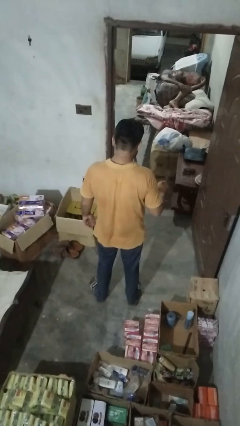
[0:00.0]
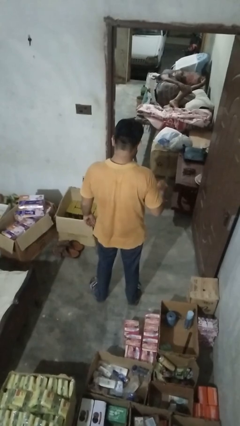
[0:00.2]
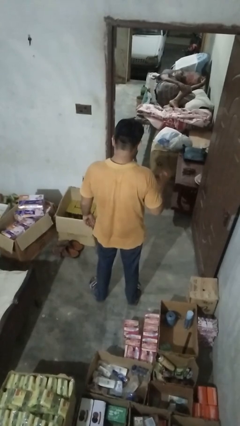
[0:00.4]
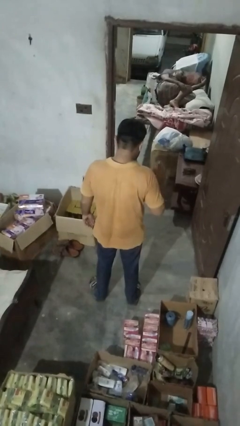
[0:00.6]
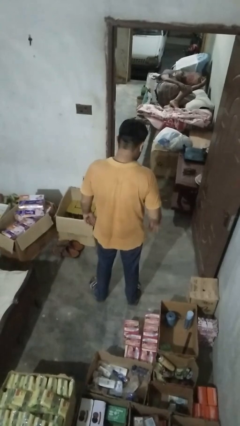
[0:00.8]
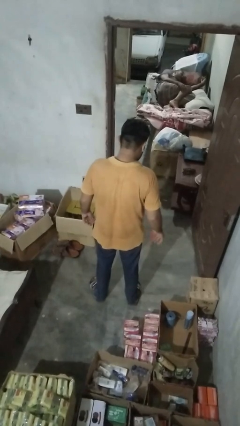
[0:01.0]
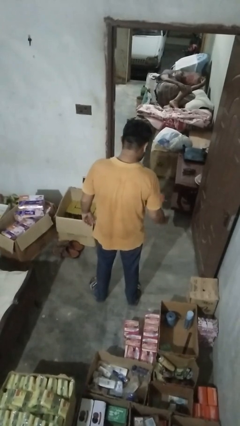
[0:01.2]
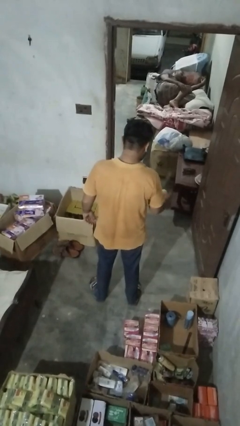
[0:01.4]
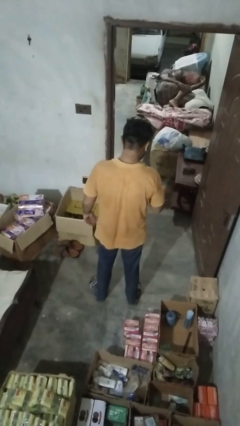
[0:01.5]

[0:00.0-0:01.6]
person bounces ball on floor

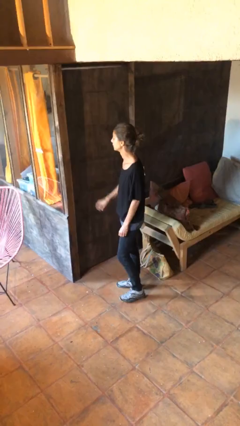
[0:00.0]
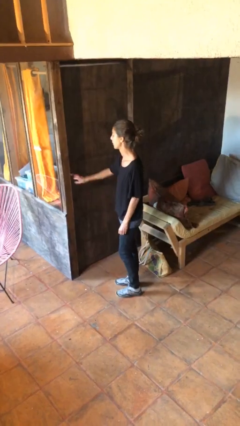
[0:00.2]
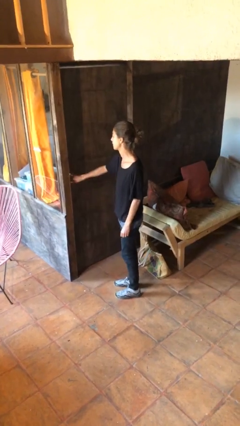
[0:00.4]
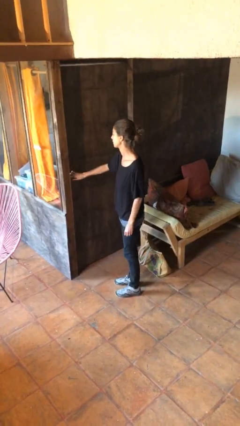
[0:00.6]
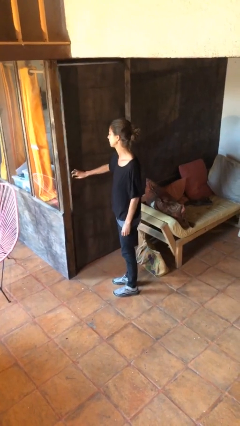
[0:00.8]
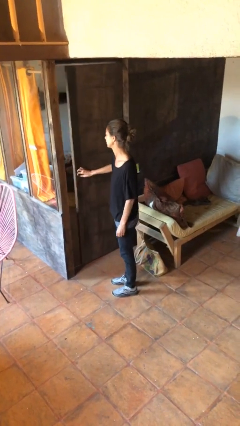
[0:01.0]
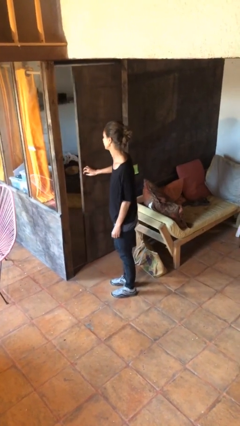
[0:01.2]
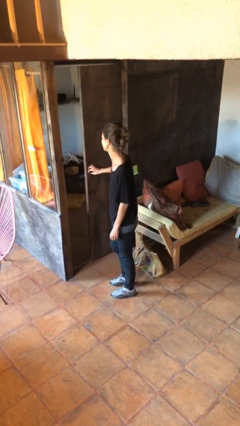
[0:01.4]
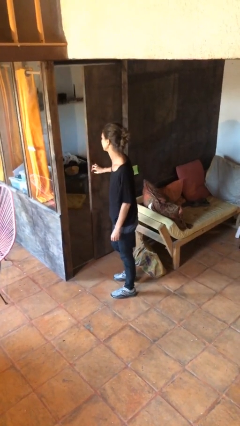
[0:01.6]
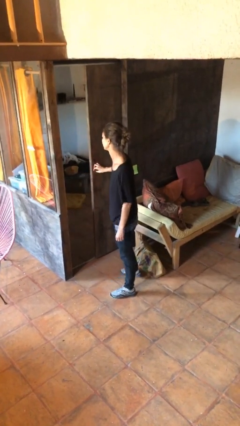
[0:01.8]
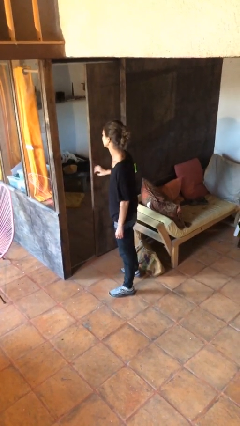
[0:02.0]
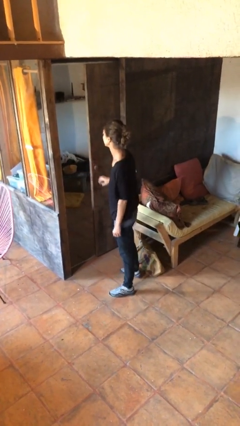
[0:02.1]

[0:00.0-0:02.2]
person opens facility door

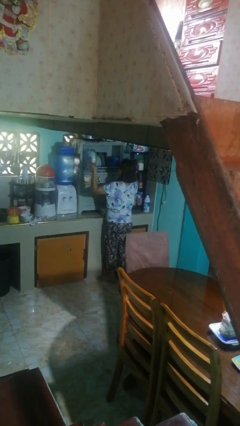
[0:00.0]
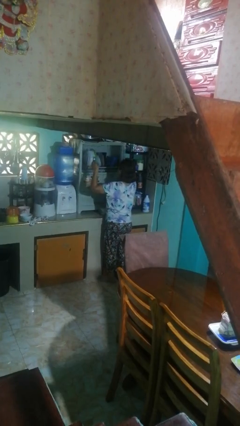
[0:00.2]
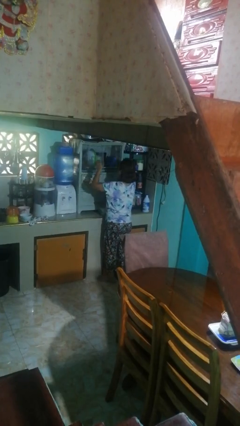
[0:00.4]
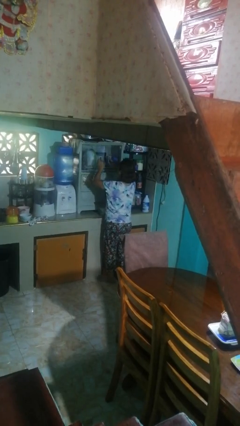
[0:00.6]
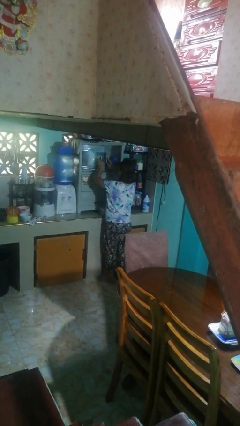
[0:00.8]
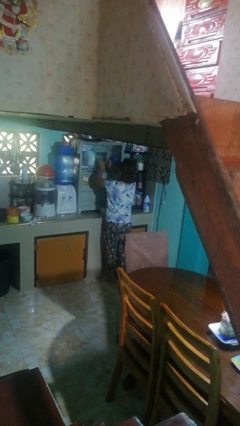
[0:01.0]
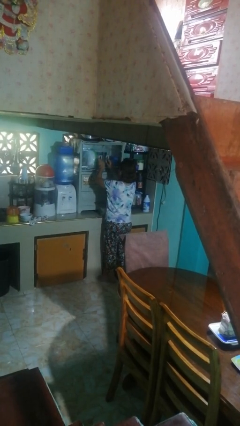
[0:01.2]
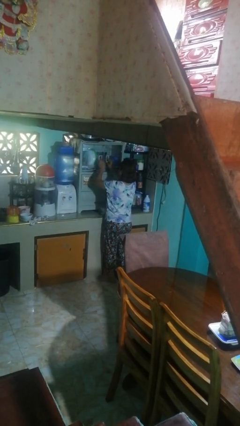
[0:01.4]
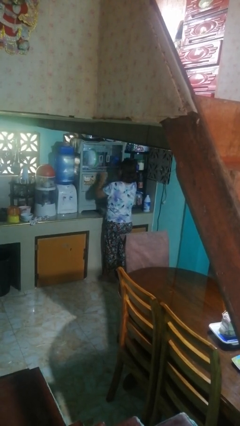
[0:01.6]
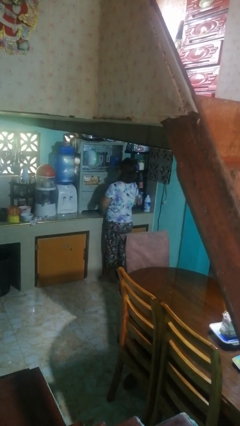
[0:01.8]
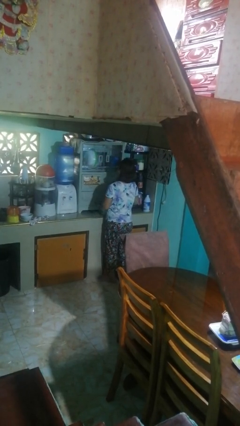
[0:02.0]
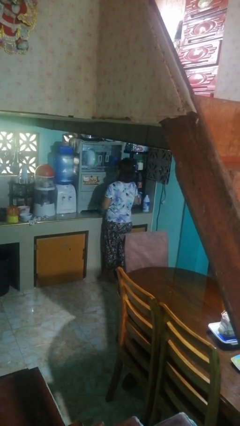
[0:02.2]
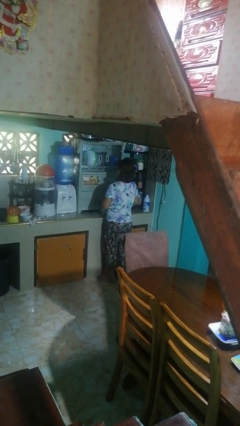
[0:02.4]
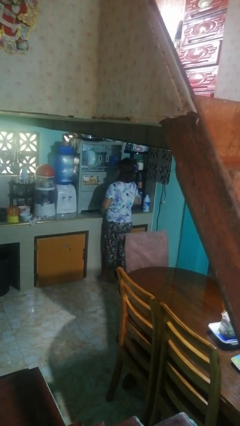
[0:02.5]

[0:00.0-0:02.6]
person opens curtains

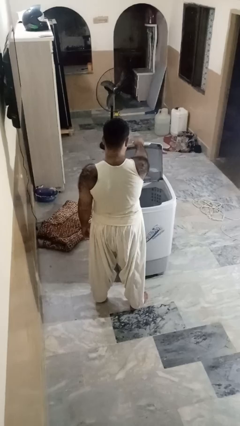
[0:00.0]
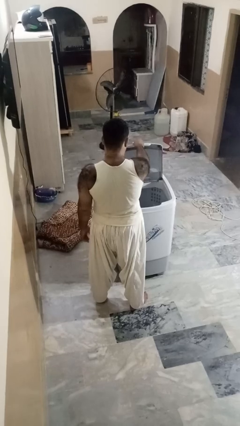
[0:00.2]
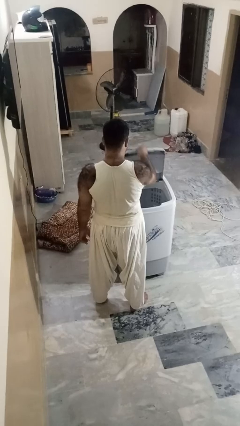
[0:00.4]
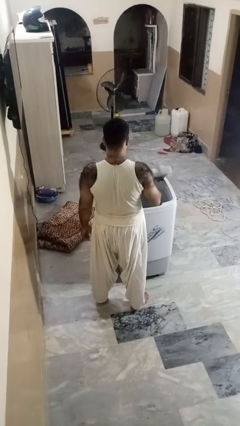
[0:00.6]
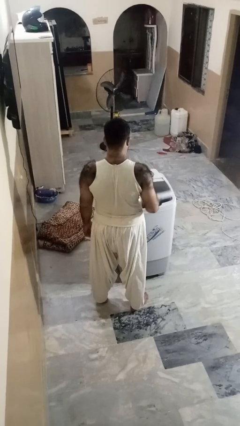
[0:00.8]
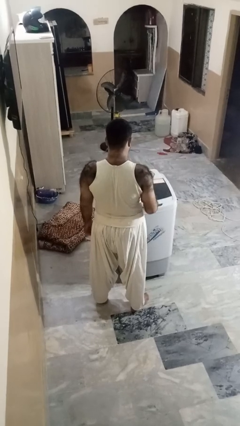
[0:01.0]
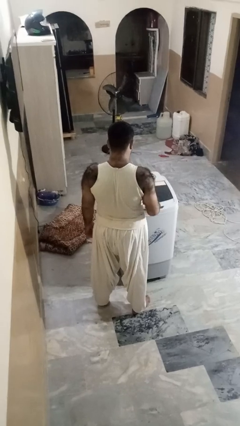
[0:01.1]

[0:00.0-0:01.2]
person closes clothes washer

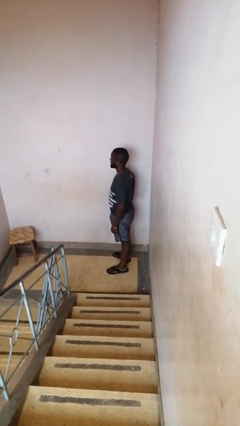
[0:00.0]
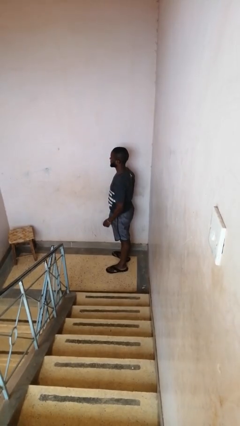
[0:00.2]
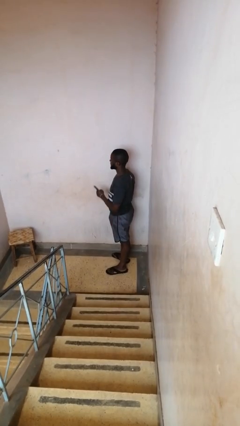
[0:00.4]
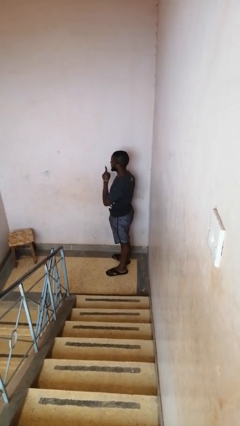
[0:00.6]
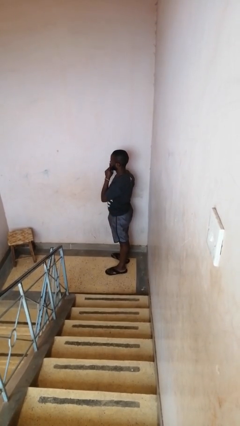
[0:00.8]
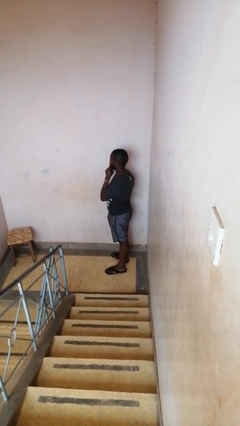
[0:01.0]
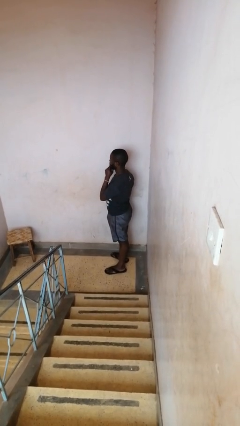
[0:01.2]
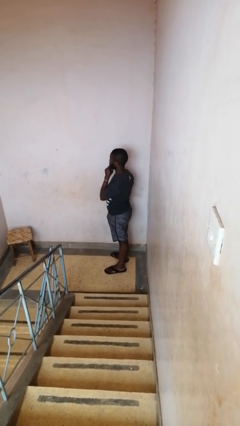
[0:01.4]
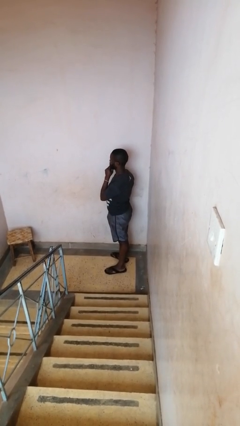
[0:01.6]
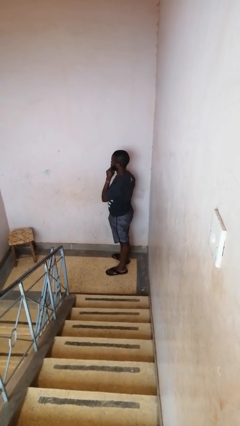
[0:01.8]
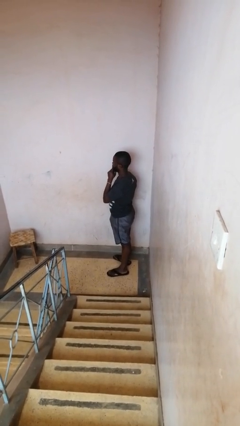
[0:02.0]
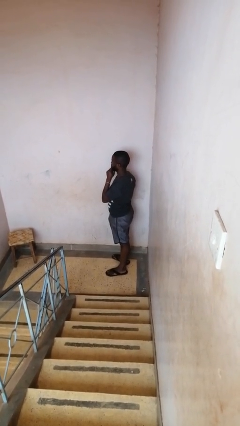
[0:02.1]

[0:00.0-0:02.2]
person gestures be quiet

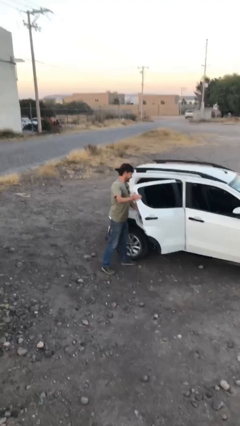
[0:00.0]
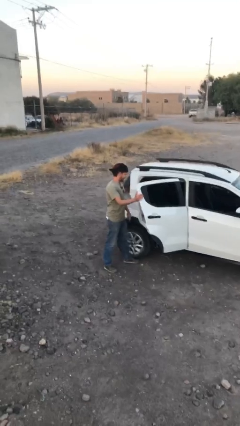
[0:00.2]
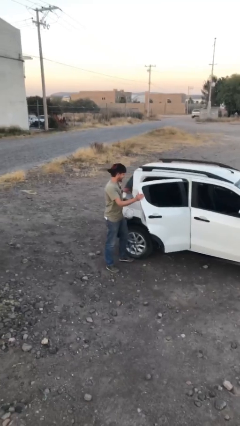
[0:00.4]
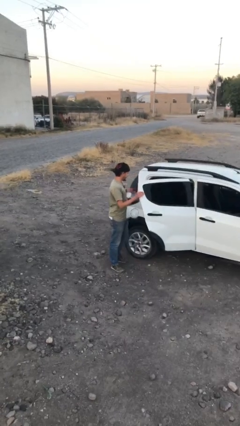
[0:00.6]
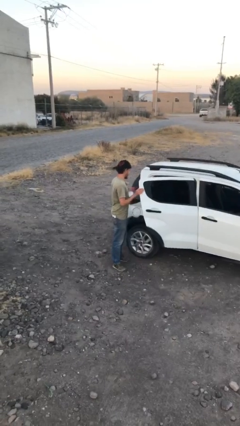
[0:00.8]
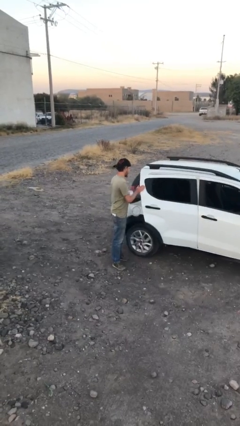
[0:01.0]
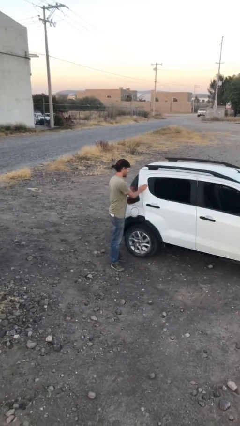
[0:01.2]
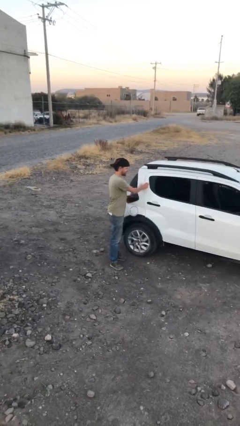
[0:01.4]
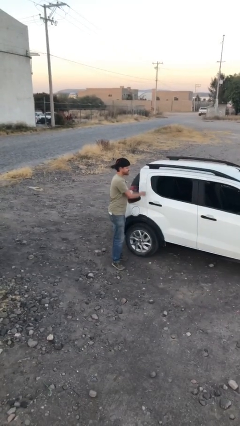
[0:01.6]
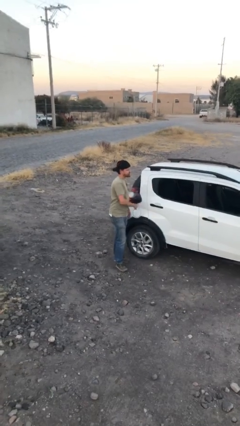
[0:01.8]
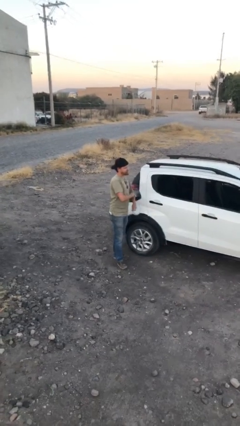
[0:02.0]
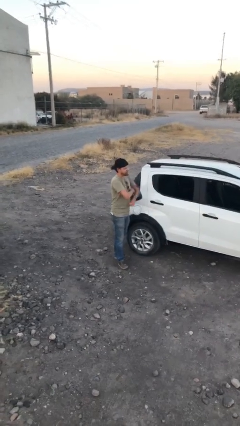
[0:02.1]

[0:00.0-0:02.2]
person closes car door

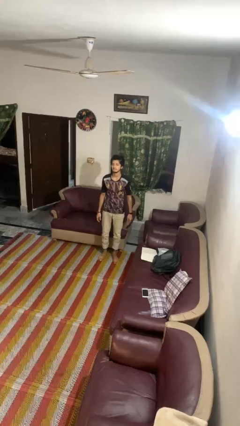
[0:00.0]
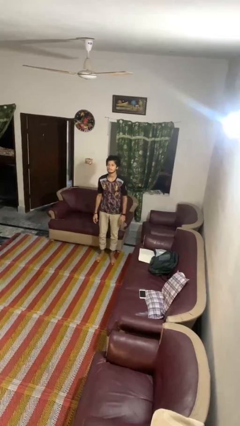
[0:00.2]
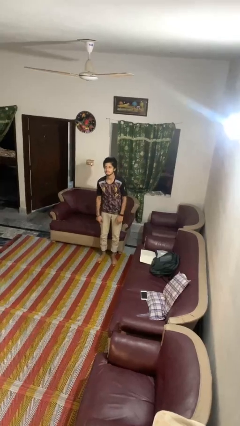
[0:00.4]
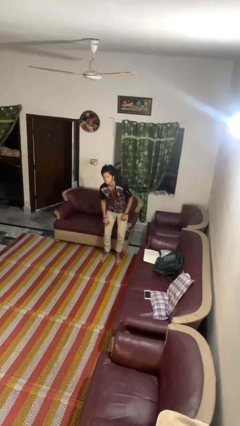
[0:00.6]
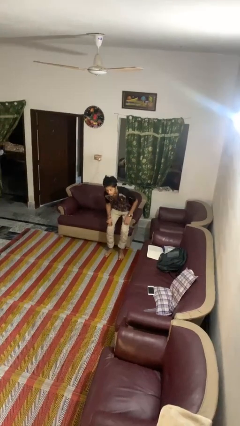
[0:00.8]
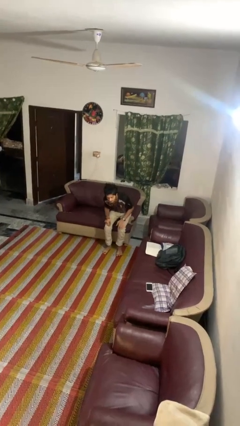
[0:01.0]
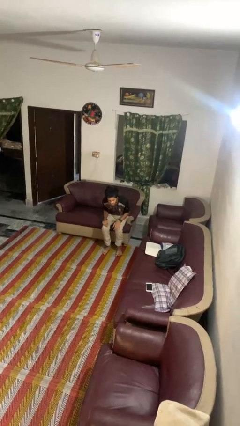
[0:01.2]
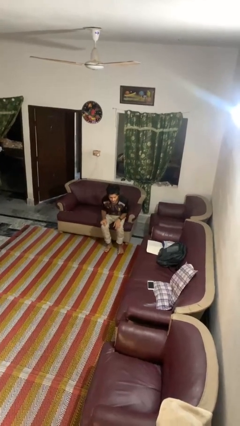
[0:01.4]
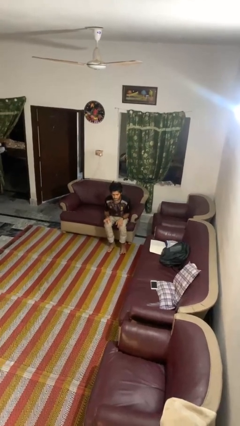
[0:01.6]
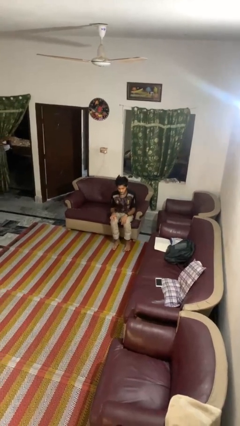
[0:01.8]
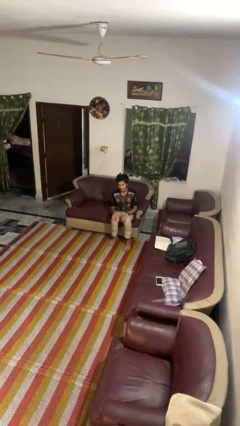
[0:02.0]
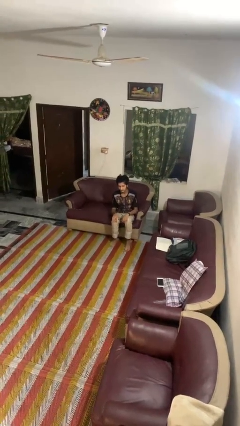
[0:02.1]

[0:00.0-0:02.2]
person sits down

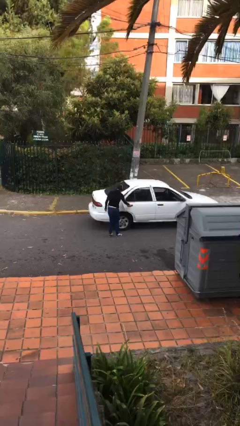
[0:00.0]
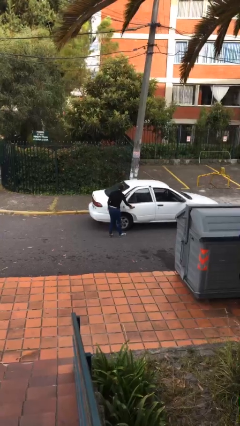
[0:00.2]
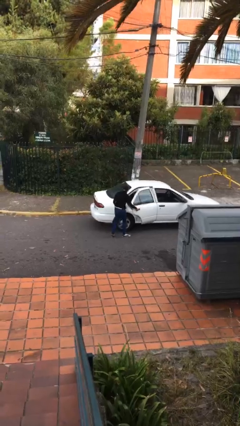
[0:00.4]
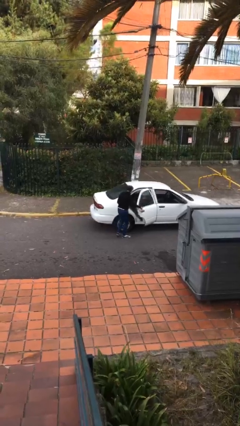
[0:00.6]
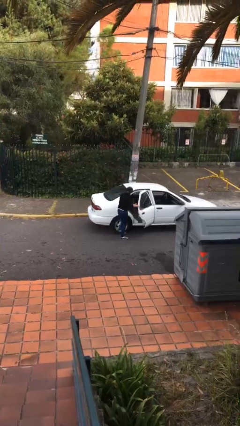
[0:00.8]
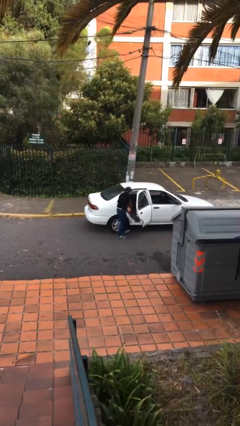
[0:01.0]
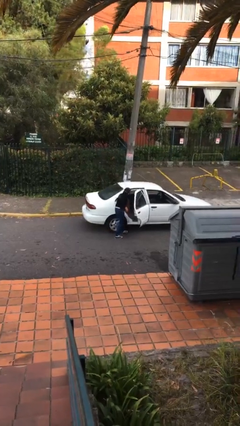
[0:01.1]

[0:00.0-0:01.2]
person opens car door

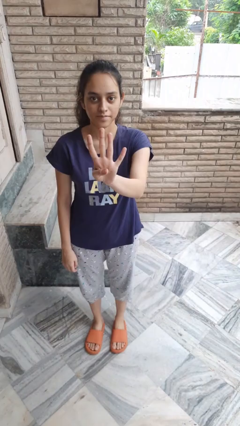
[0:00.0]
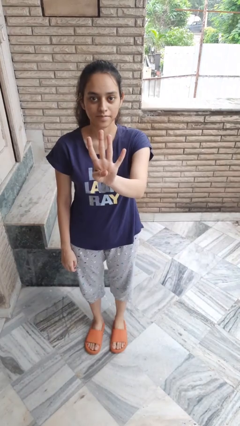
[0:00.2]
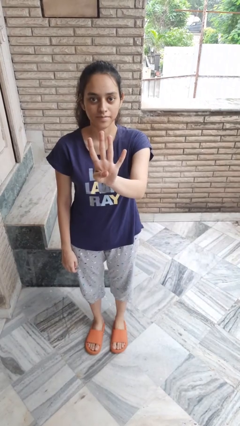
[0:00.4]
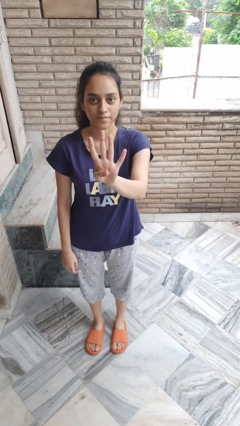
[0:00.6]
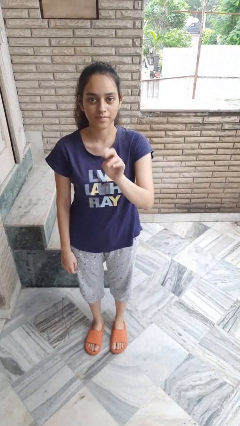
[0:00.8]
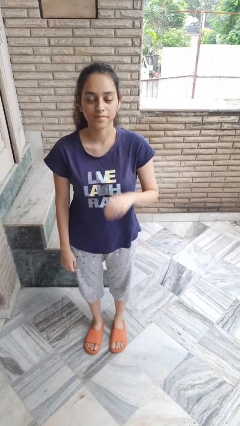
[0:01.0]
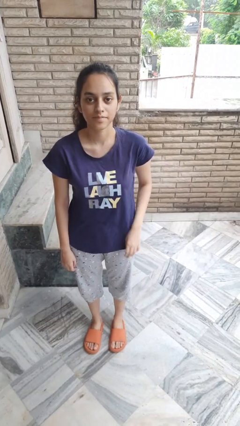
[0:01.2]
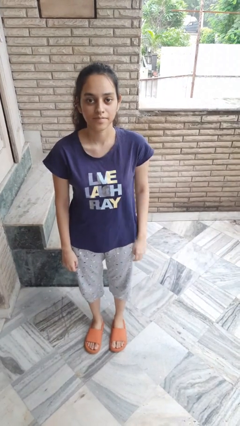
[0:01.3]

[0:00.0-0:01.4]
person gestures number four
